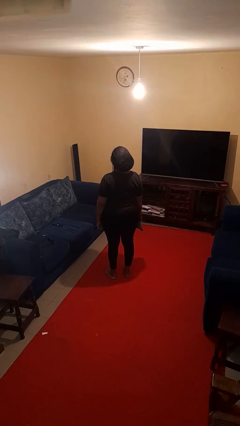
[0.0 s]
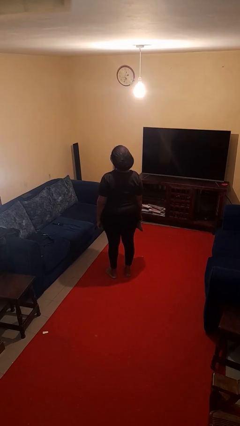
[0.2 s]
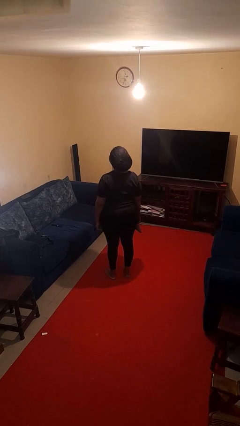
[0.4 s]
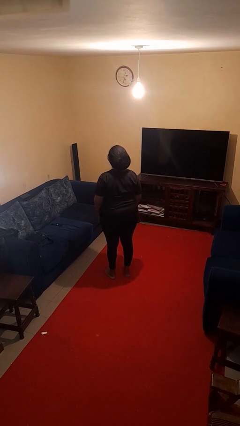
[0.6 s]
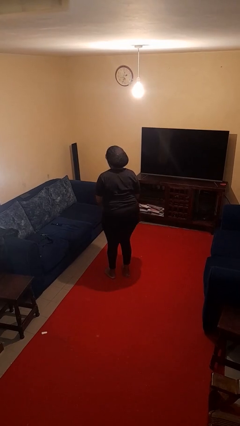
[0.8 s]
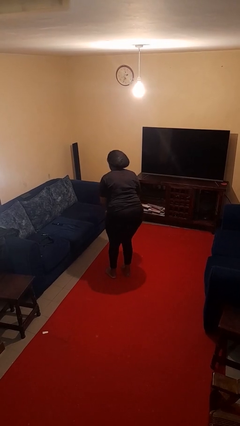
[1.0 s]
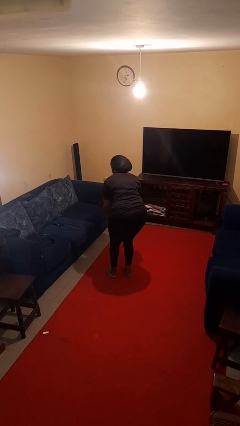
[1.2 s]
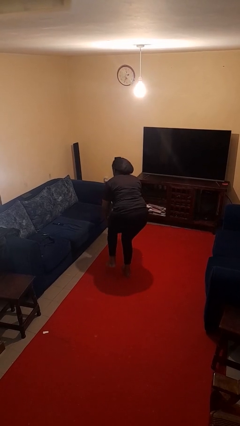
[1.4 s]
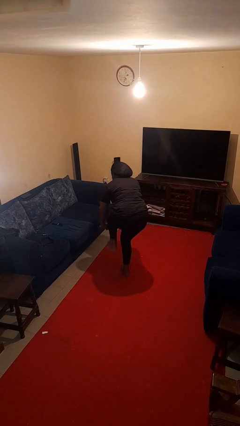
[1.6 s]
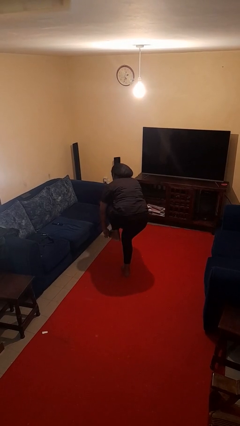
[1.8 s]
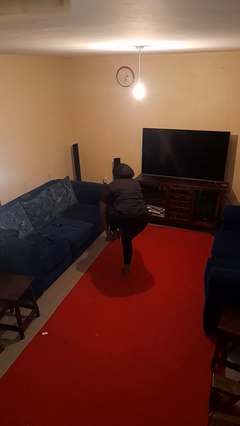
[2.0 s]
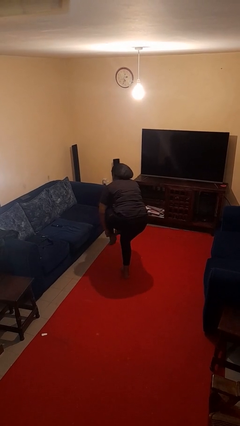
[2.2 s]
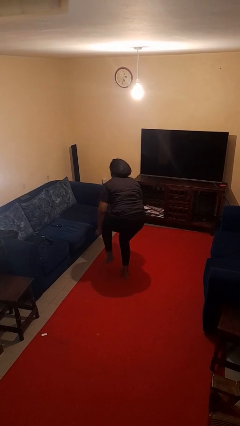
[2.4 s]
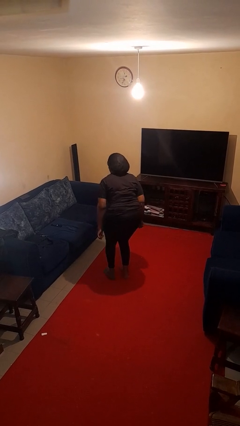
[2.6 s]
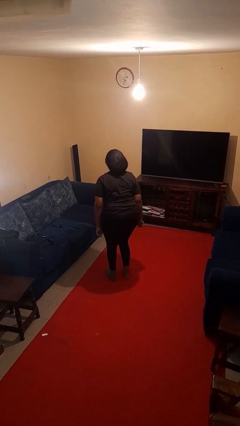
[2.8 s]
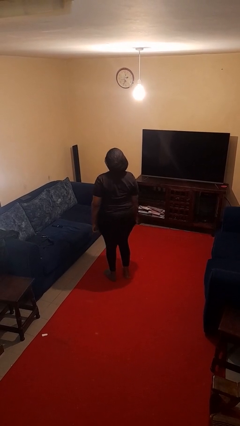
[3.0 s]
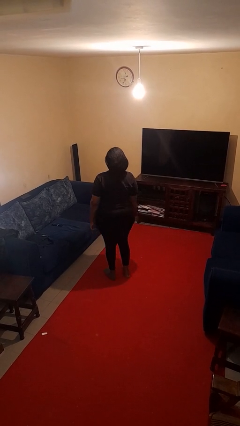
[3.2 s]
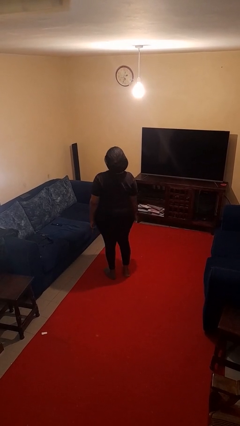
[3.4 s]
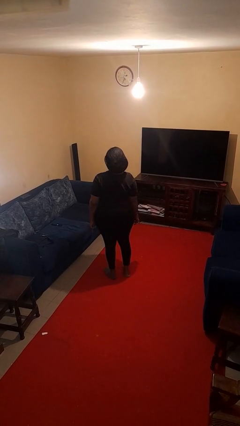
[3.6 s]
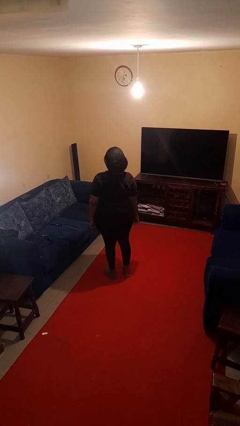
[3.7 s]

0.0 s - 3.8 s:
person puts on socks

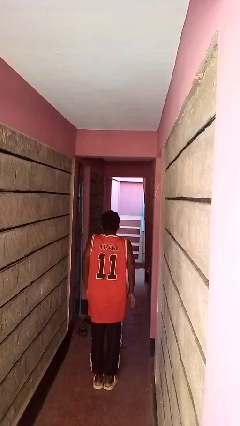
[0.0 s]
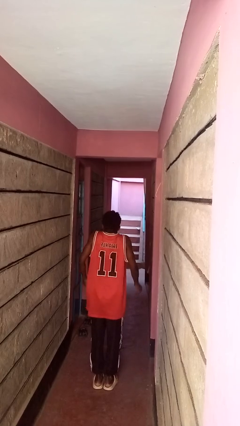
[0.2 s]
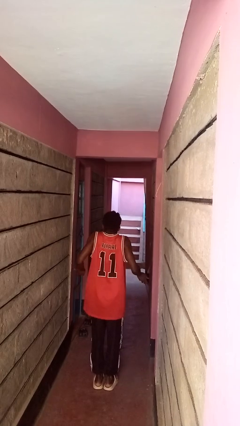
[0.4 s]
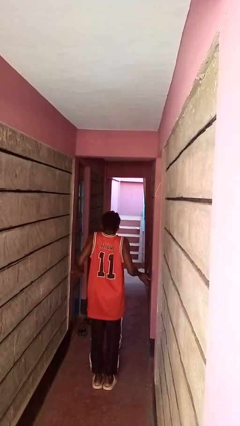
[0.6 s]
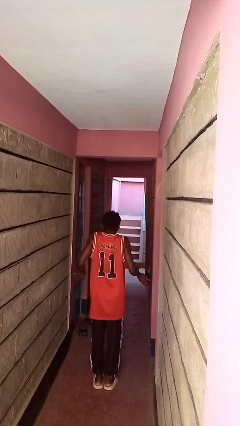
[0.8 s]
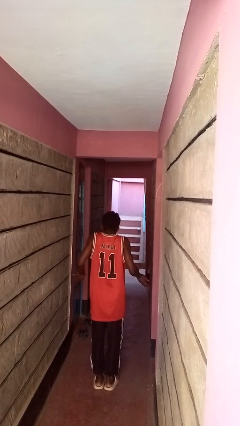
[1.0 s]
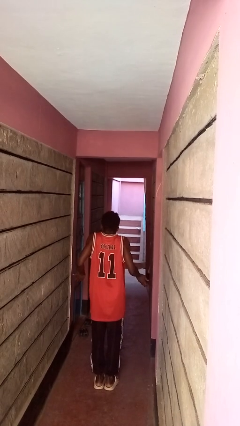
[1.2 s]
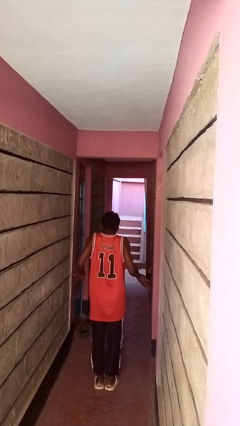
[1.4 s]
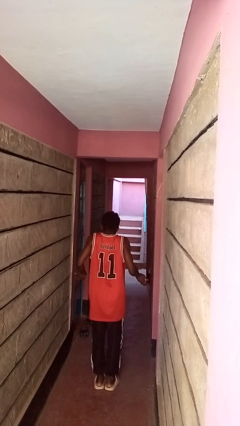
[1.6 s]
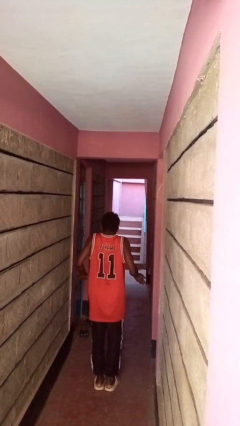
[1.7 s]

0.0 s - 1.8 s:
person shrugs

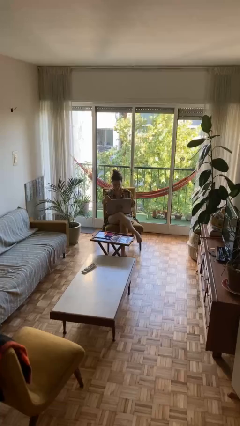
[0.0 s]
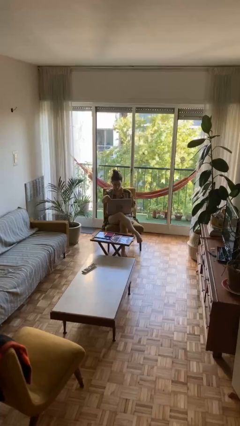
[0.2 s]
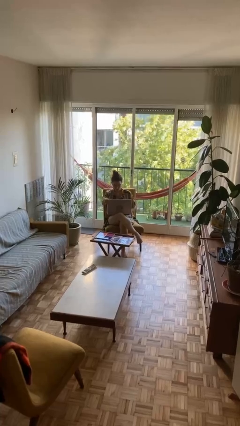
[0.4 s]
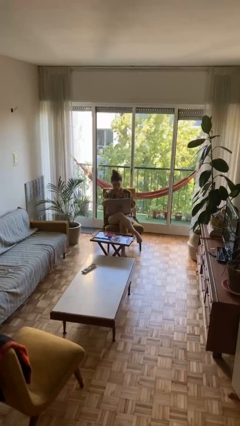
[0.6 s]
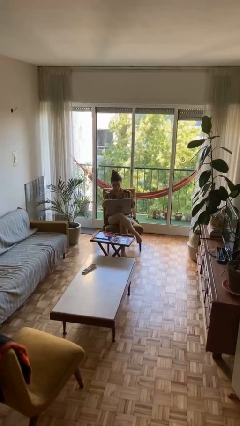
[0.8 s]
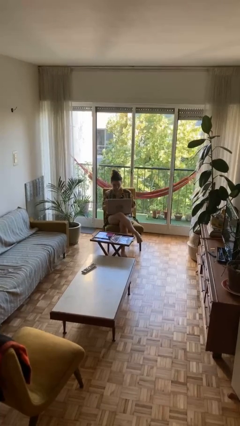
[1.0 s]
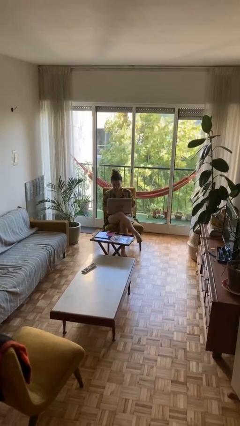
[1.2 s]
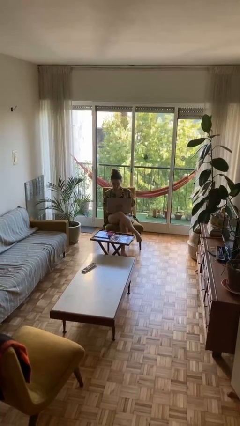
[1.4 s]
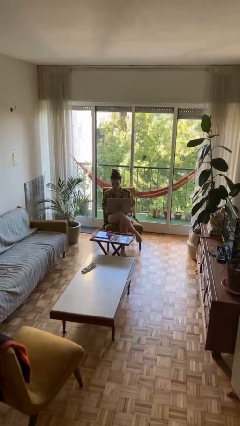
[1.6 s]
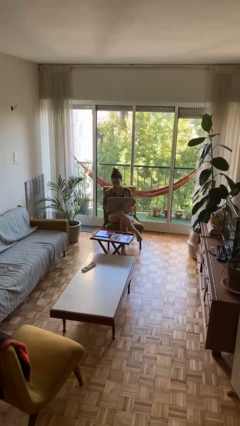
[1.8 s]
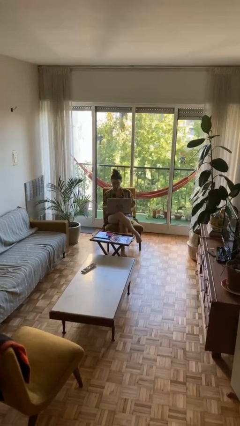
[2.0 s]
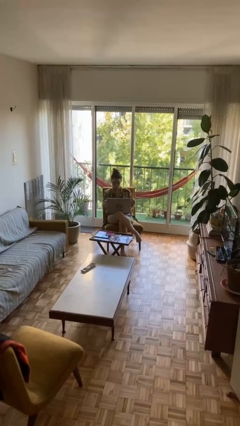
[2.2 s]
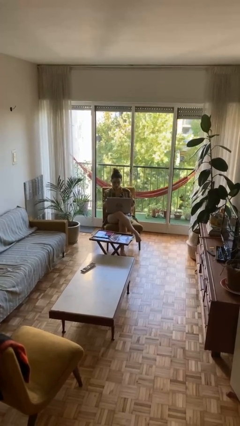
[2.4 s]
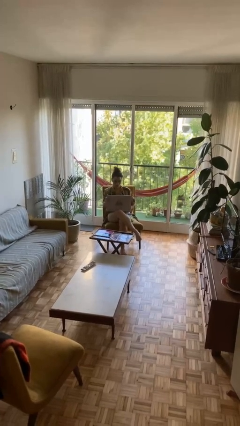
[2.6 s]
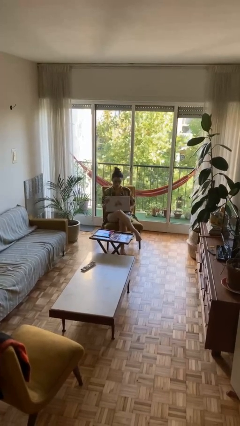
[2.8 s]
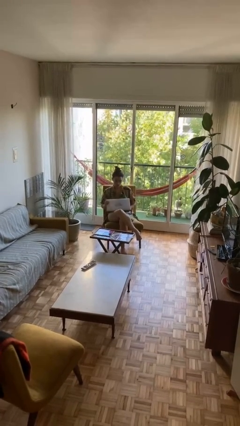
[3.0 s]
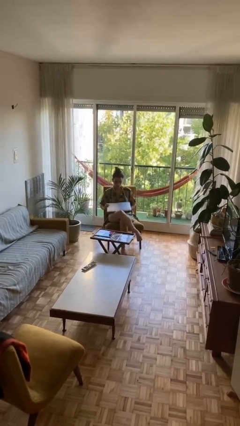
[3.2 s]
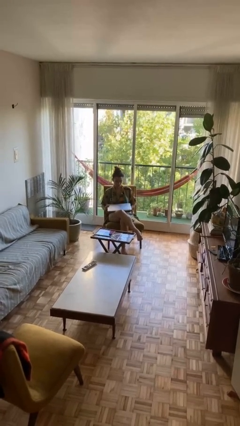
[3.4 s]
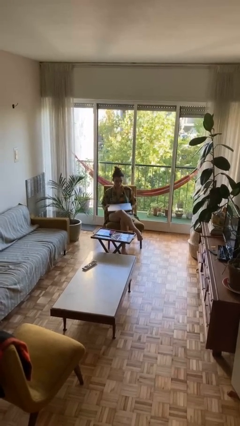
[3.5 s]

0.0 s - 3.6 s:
person interacts with laptop

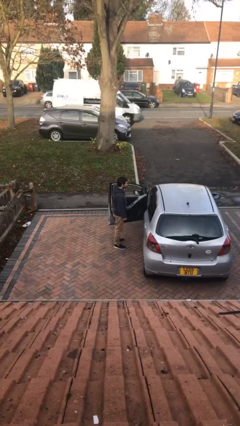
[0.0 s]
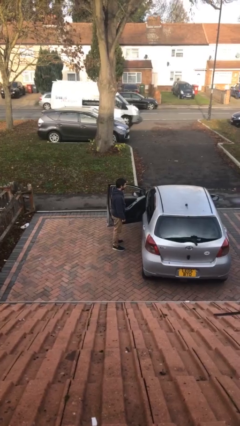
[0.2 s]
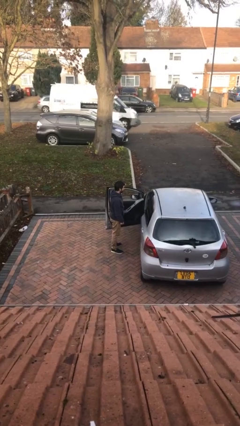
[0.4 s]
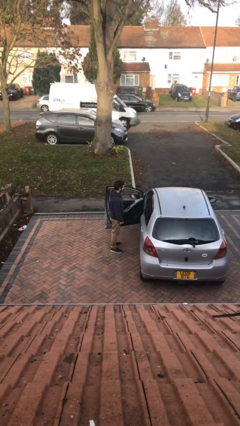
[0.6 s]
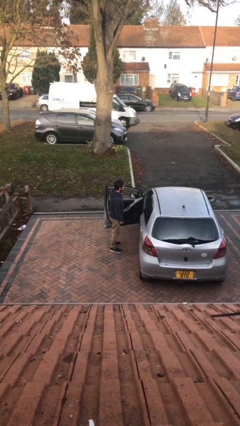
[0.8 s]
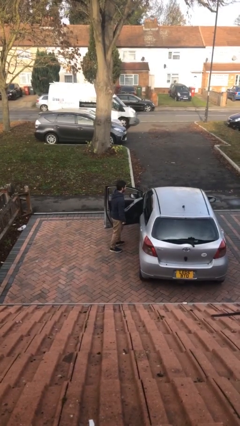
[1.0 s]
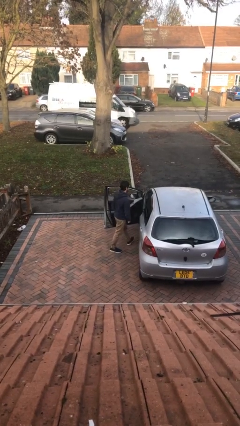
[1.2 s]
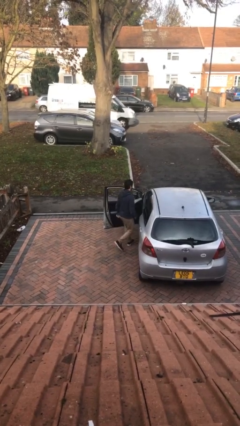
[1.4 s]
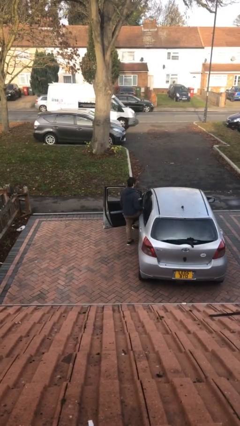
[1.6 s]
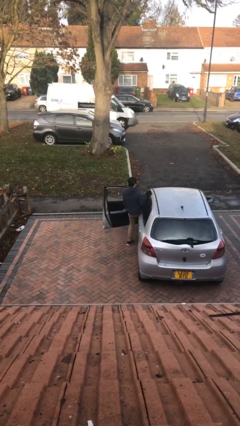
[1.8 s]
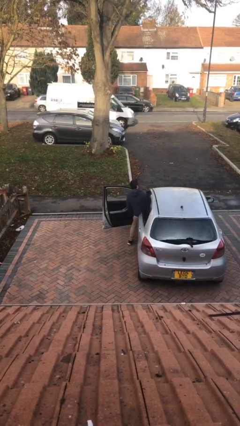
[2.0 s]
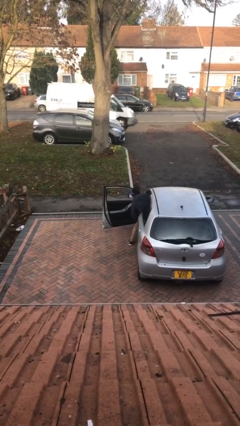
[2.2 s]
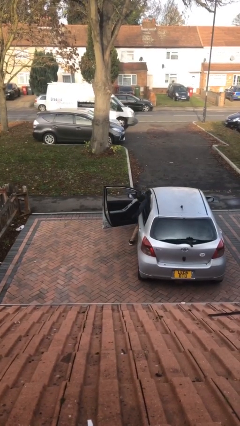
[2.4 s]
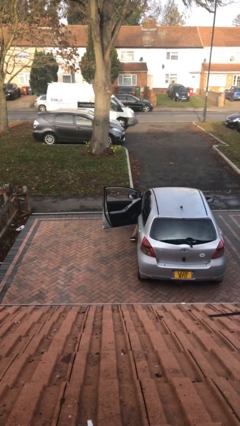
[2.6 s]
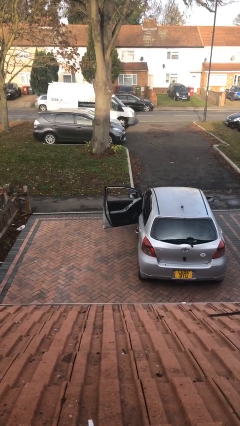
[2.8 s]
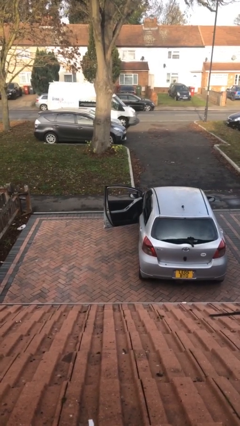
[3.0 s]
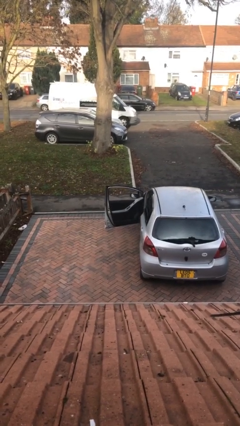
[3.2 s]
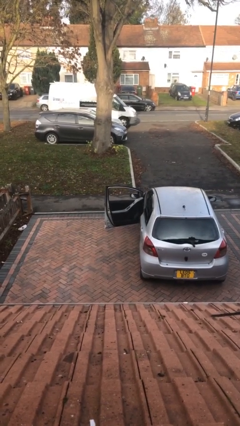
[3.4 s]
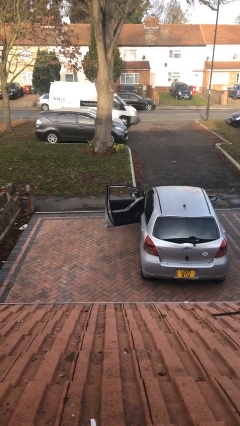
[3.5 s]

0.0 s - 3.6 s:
person enters car

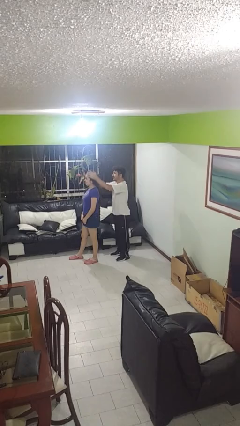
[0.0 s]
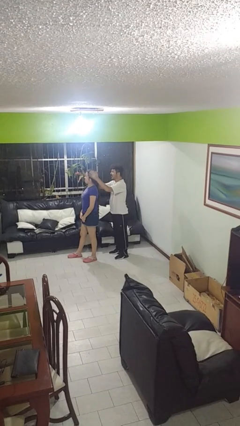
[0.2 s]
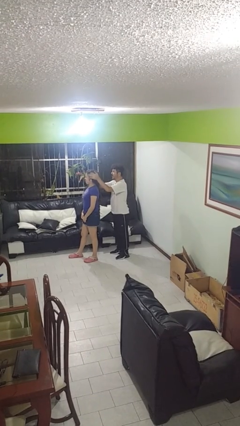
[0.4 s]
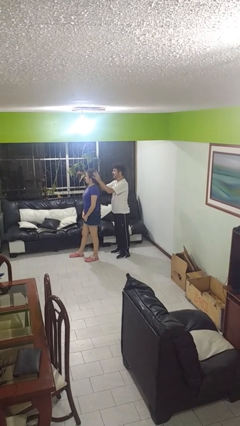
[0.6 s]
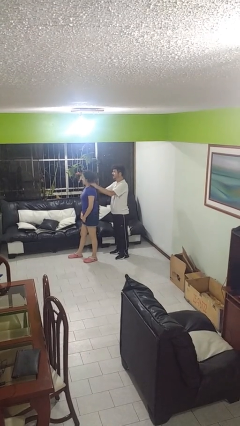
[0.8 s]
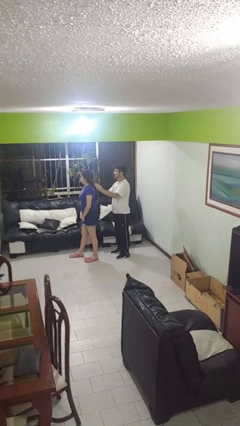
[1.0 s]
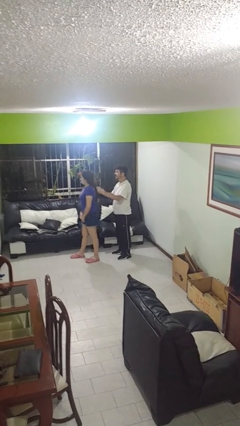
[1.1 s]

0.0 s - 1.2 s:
person grabs person by hair

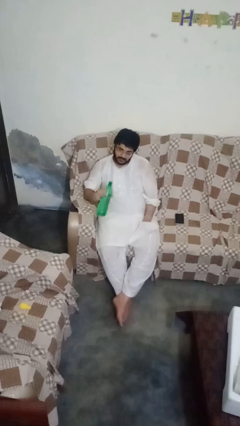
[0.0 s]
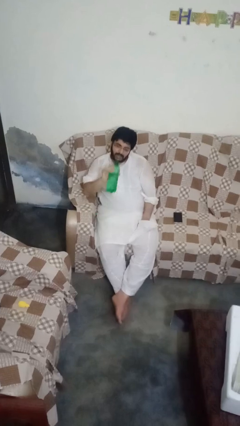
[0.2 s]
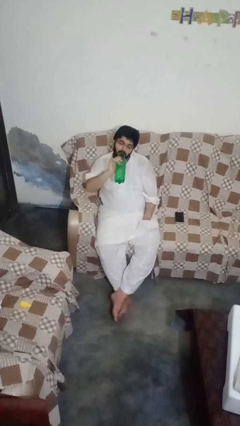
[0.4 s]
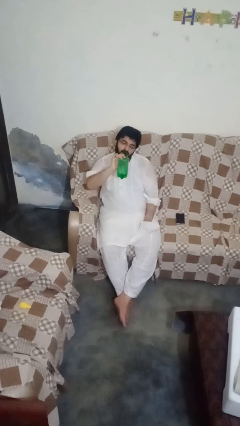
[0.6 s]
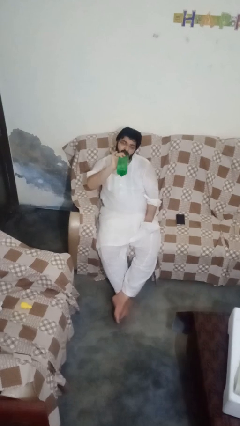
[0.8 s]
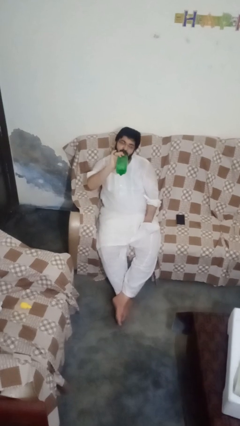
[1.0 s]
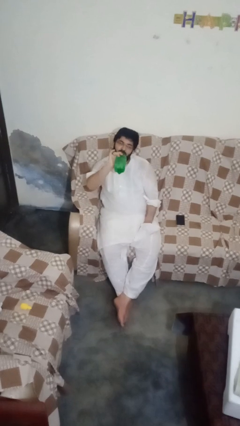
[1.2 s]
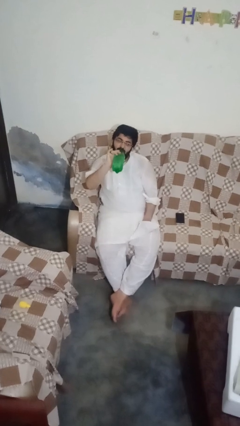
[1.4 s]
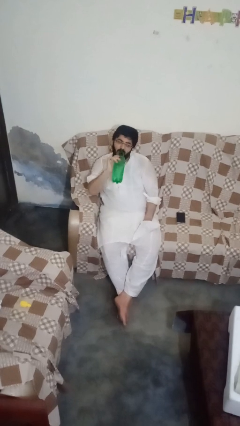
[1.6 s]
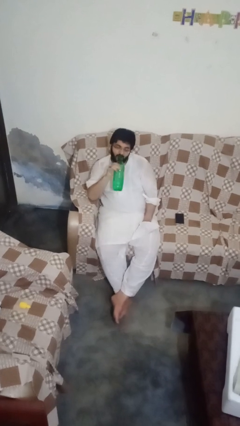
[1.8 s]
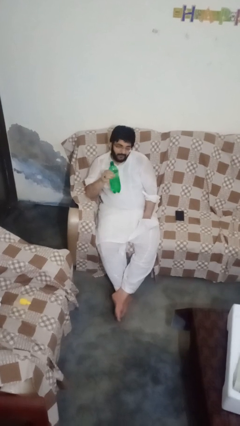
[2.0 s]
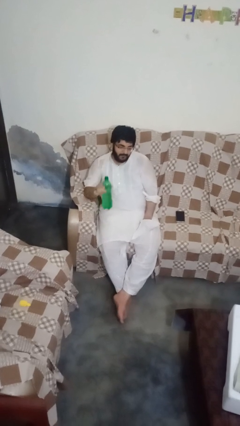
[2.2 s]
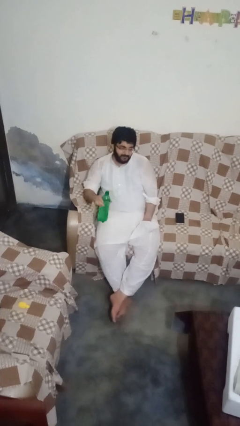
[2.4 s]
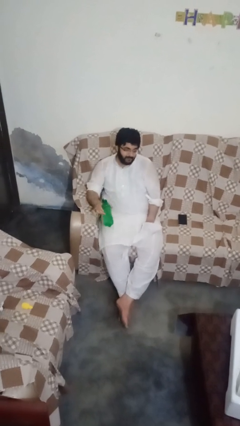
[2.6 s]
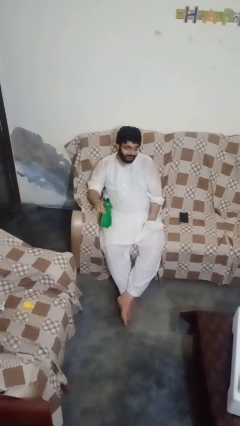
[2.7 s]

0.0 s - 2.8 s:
person drinks from bottle

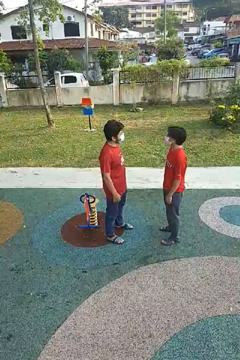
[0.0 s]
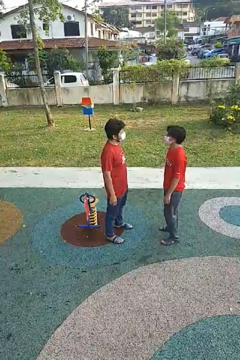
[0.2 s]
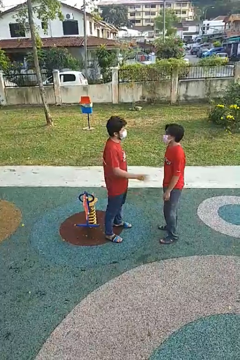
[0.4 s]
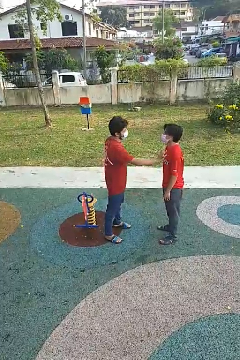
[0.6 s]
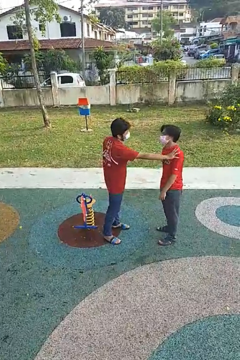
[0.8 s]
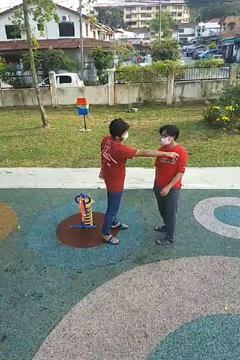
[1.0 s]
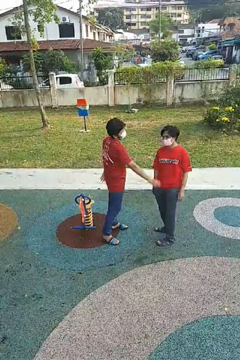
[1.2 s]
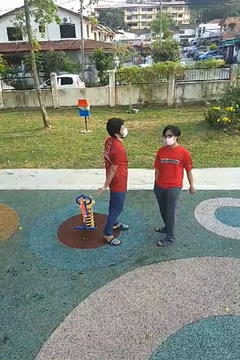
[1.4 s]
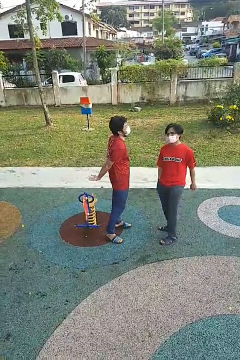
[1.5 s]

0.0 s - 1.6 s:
person shoves person
